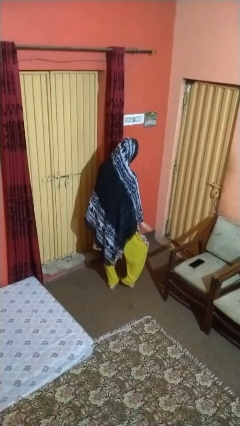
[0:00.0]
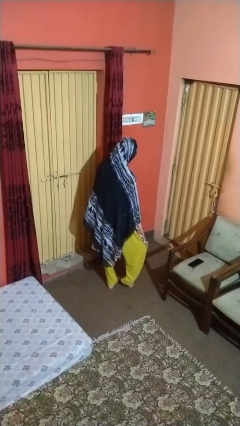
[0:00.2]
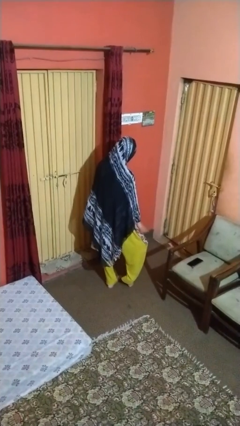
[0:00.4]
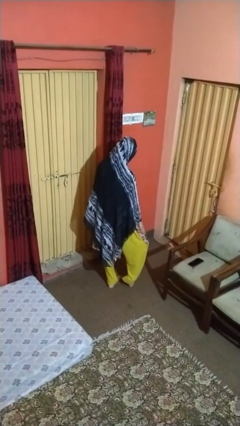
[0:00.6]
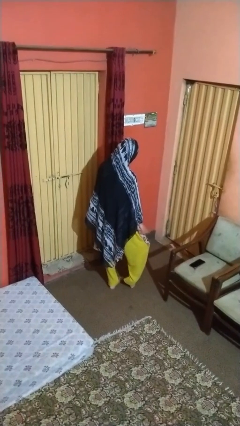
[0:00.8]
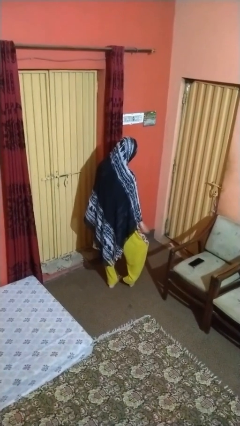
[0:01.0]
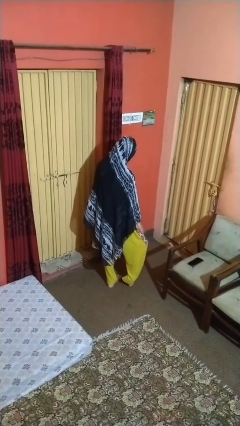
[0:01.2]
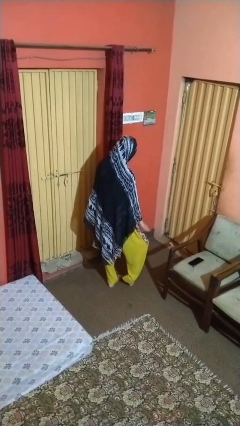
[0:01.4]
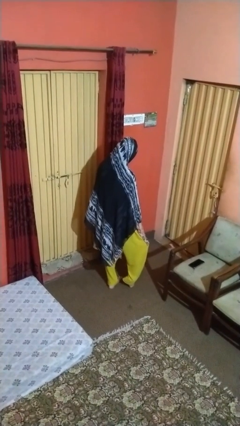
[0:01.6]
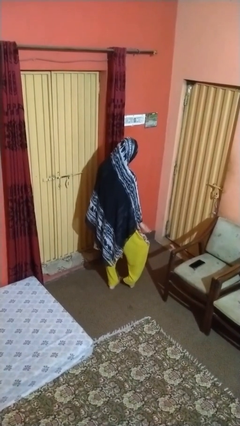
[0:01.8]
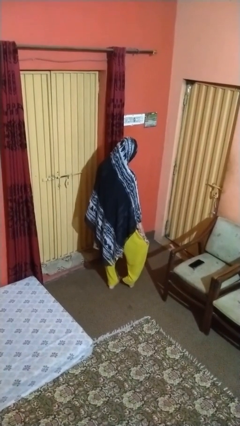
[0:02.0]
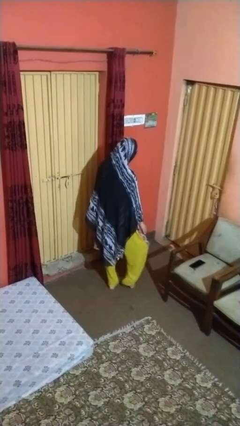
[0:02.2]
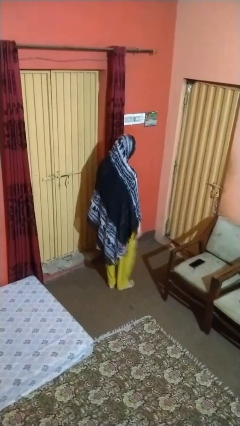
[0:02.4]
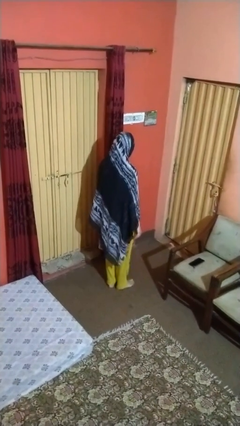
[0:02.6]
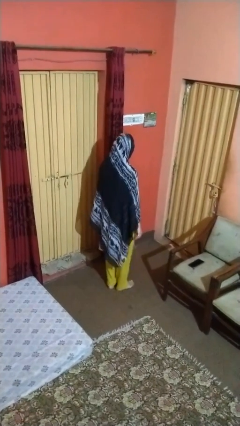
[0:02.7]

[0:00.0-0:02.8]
person slaps hands on thighs

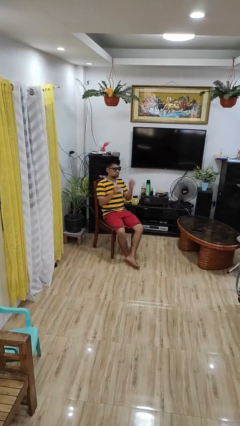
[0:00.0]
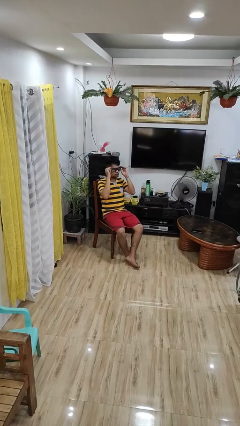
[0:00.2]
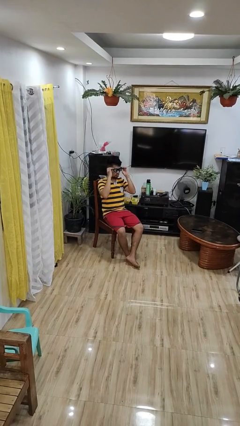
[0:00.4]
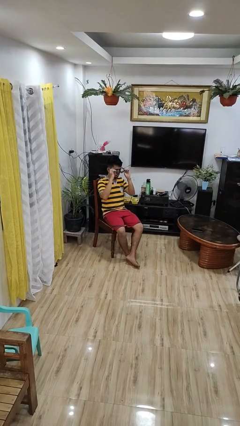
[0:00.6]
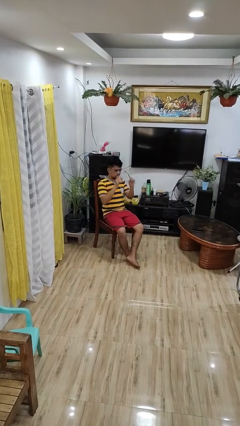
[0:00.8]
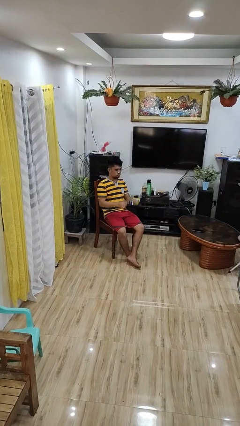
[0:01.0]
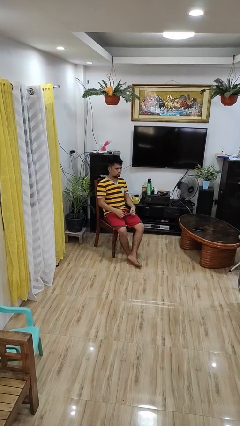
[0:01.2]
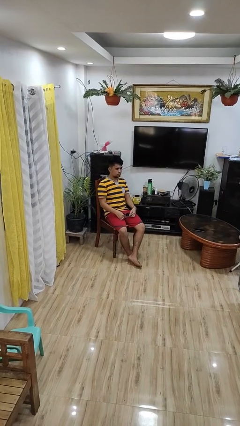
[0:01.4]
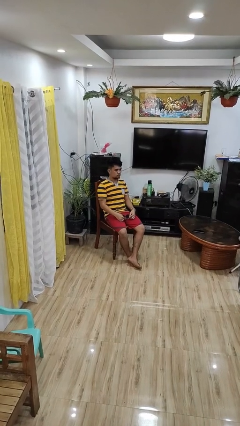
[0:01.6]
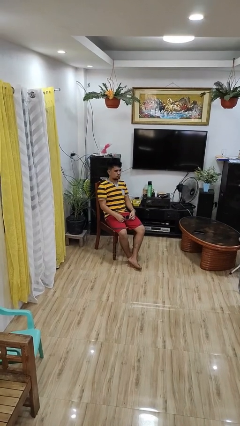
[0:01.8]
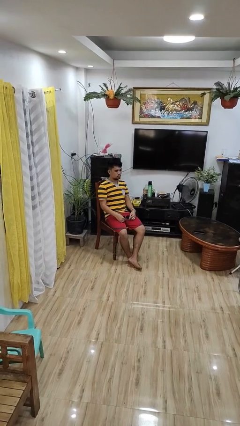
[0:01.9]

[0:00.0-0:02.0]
person takes off sunglasses

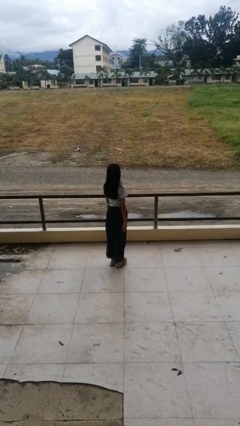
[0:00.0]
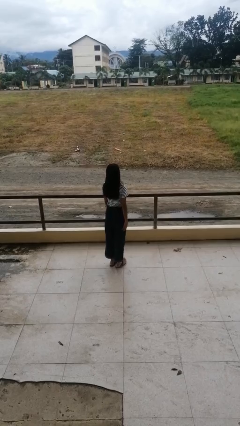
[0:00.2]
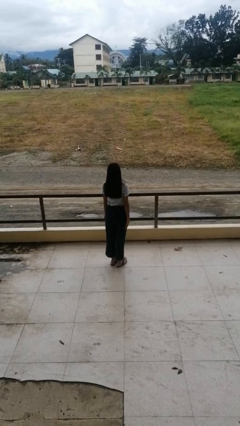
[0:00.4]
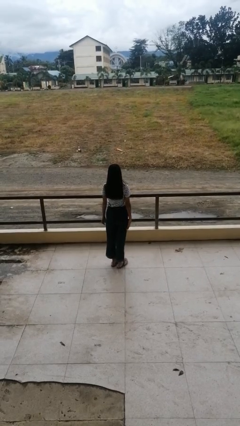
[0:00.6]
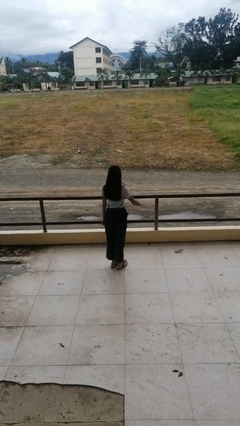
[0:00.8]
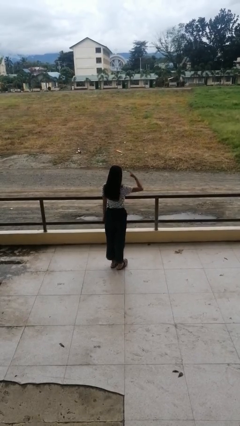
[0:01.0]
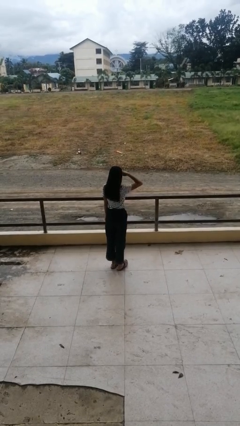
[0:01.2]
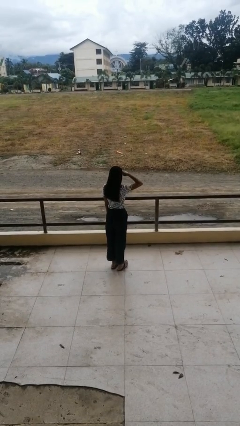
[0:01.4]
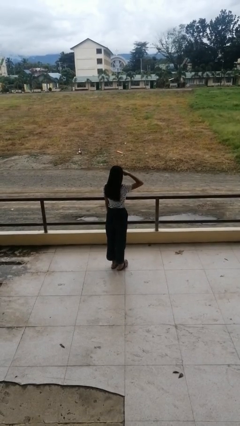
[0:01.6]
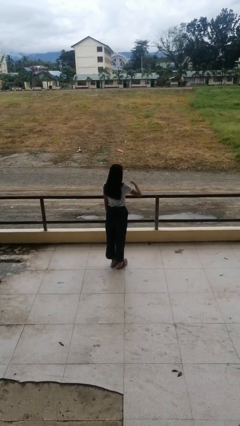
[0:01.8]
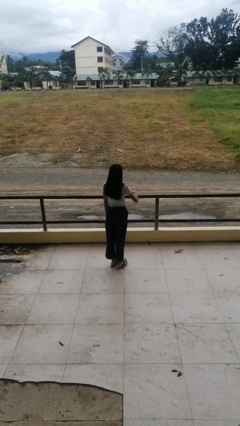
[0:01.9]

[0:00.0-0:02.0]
person salutes

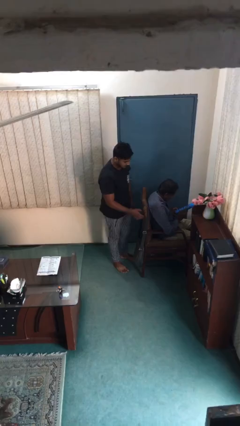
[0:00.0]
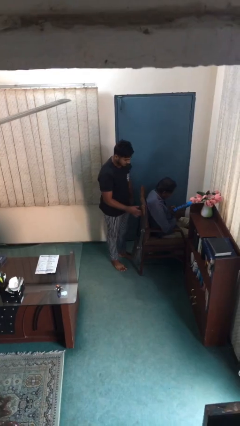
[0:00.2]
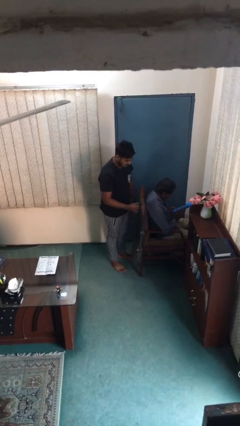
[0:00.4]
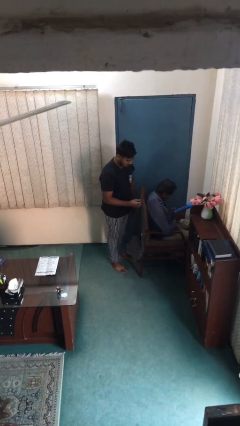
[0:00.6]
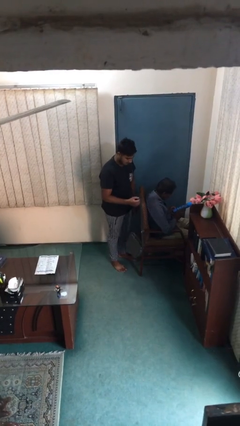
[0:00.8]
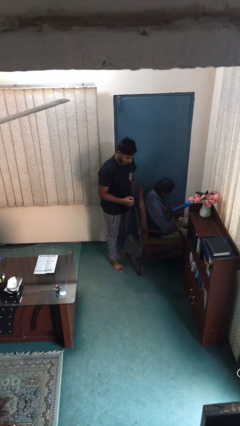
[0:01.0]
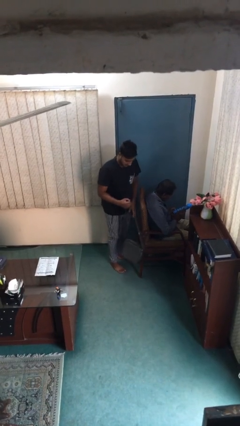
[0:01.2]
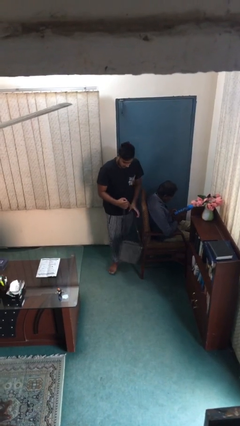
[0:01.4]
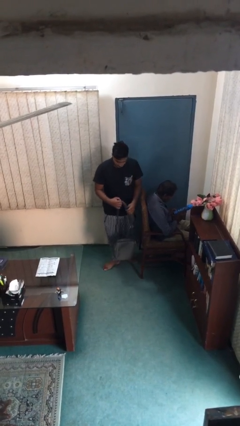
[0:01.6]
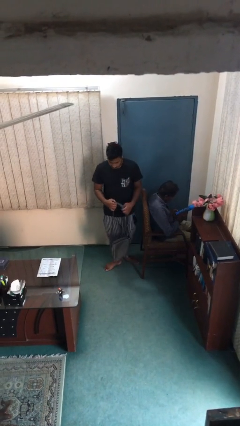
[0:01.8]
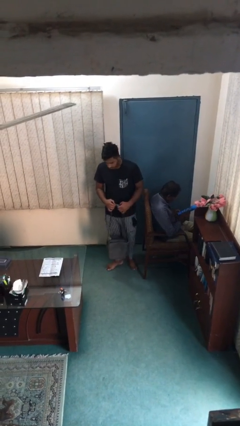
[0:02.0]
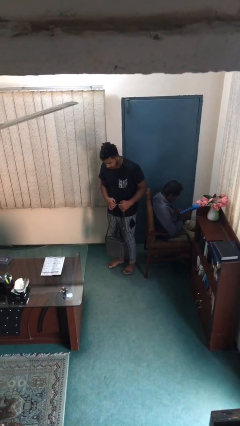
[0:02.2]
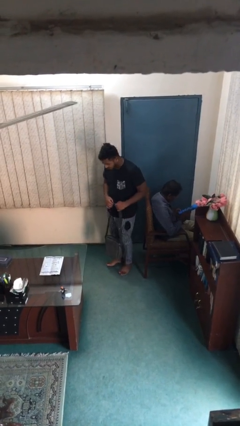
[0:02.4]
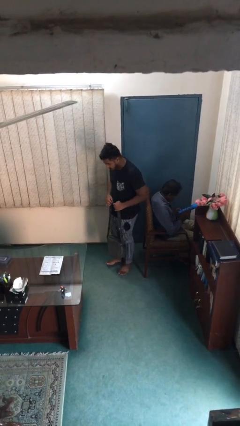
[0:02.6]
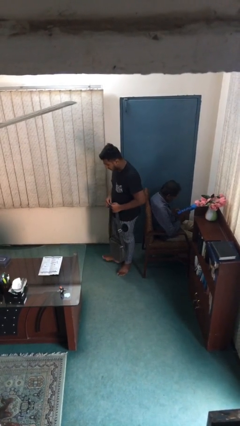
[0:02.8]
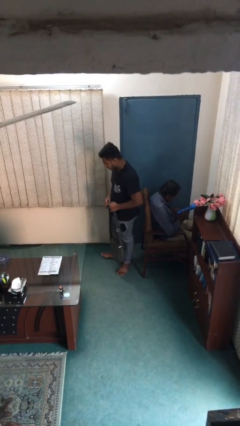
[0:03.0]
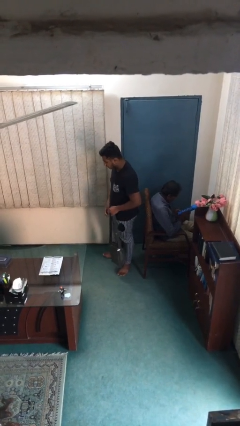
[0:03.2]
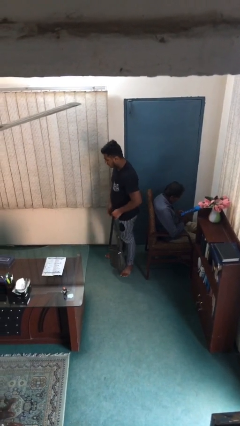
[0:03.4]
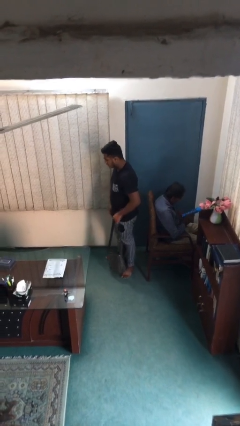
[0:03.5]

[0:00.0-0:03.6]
person steals object from person

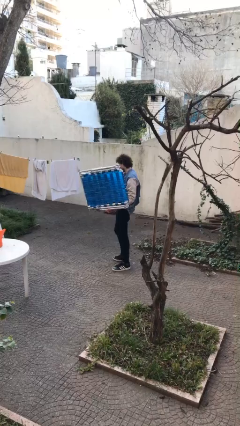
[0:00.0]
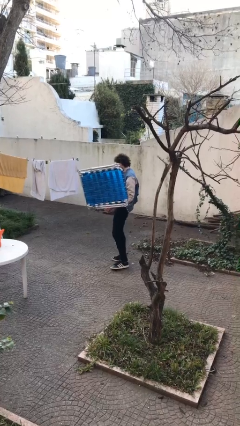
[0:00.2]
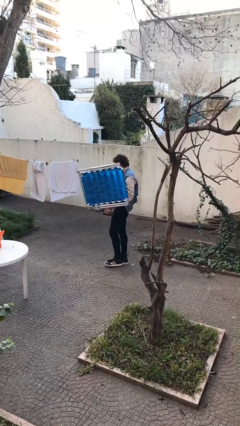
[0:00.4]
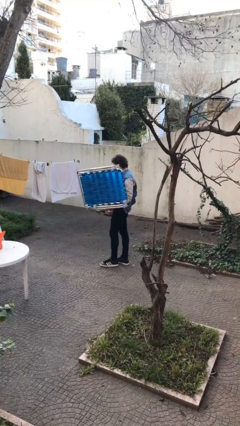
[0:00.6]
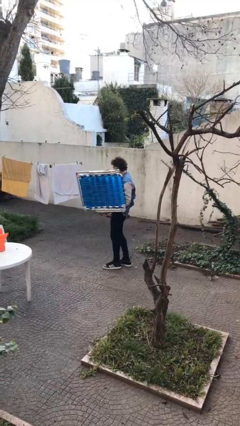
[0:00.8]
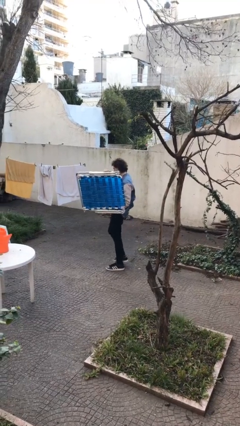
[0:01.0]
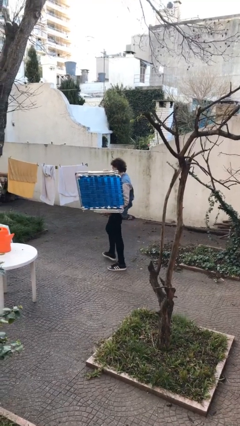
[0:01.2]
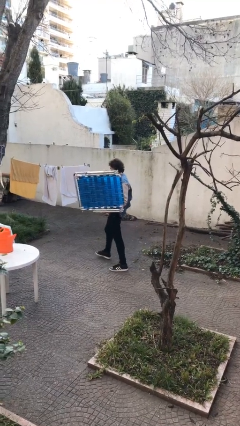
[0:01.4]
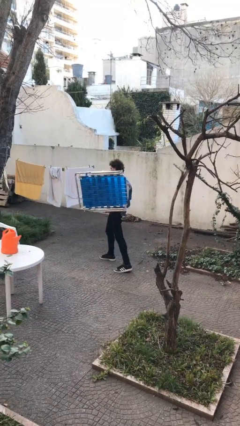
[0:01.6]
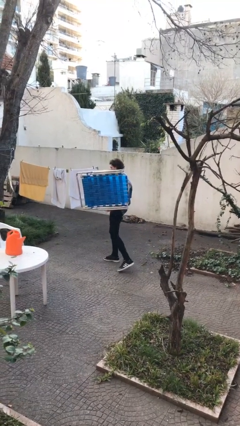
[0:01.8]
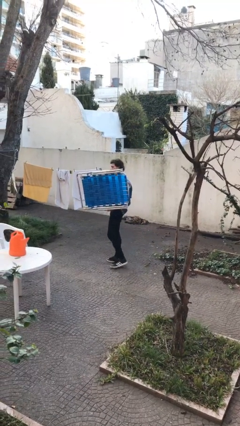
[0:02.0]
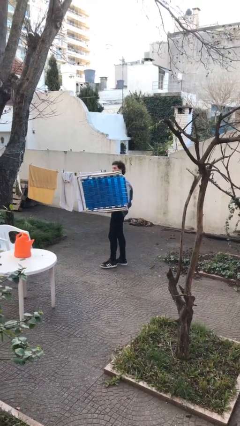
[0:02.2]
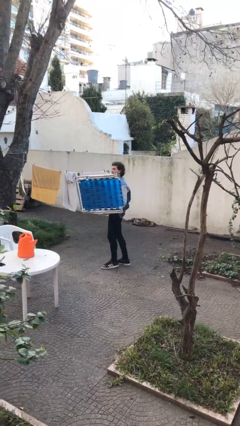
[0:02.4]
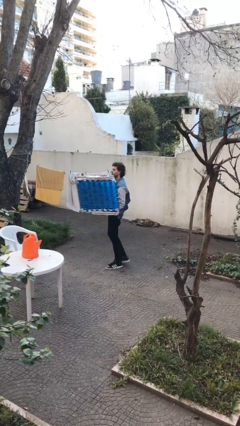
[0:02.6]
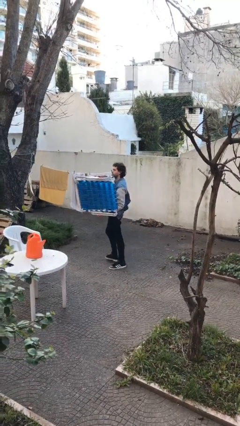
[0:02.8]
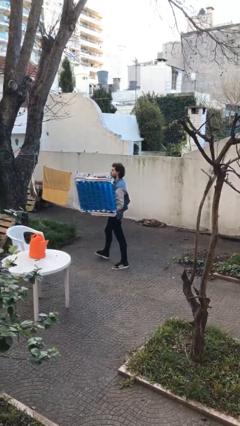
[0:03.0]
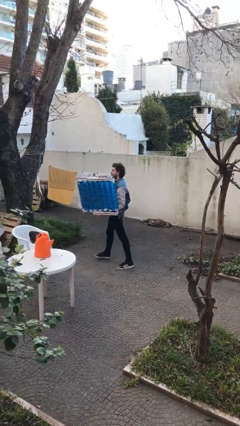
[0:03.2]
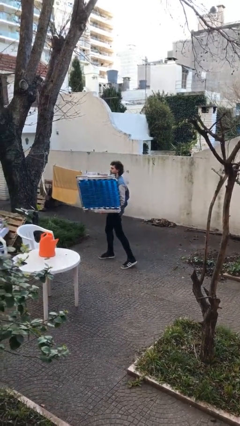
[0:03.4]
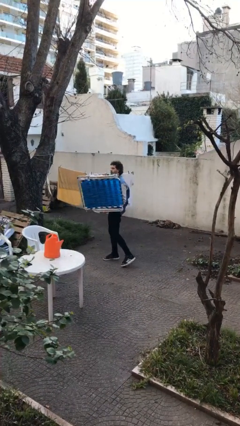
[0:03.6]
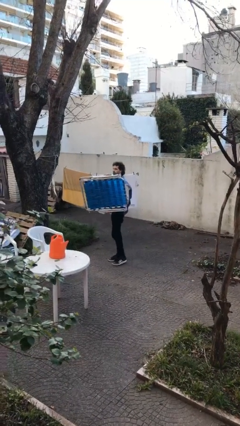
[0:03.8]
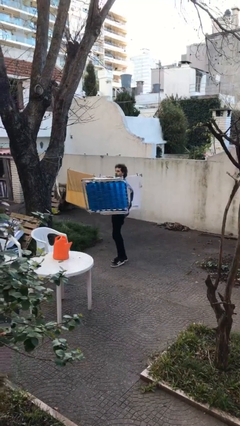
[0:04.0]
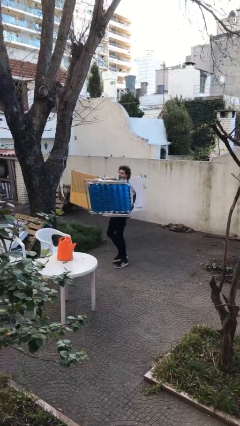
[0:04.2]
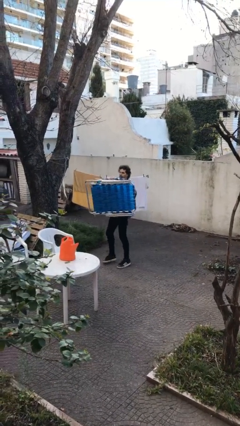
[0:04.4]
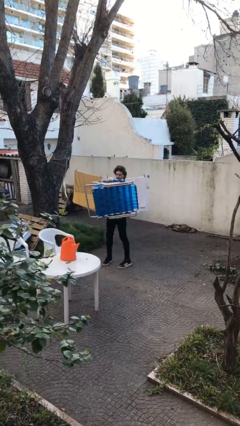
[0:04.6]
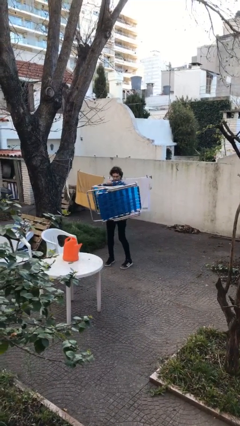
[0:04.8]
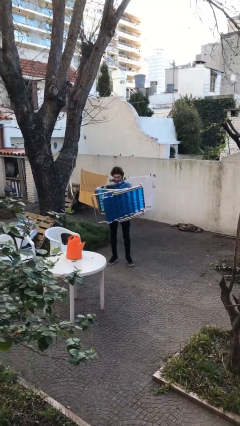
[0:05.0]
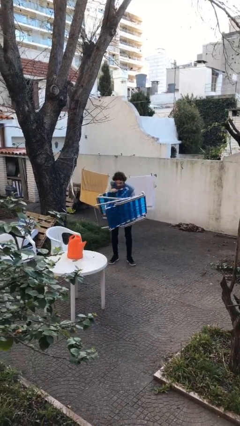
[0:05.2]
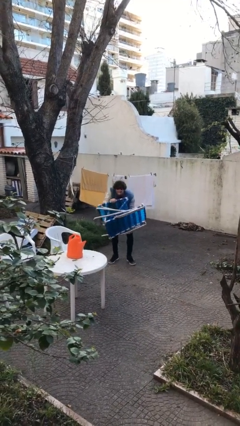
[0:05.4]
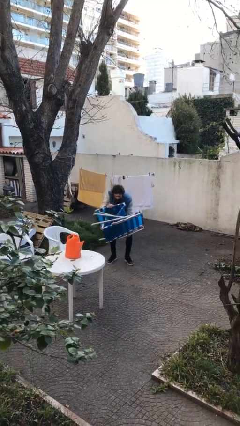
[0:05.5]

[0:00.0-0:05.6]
person carries heavy object

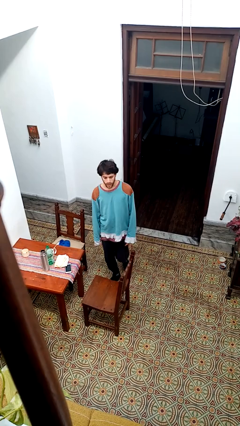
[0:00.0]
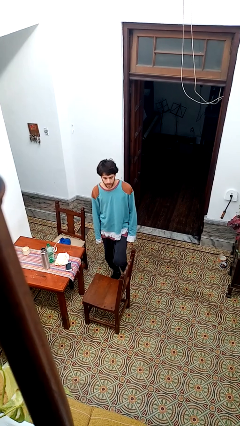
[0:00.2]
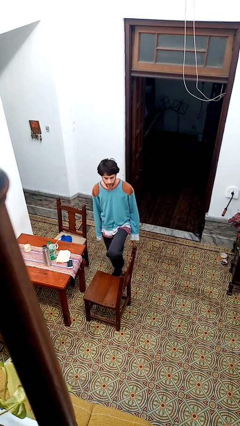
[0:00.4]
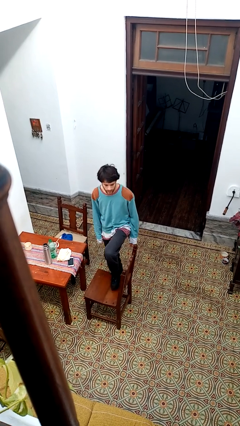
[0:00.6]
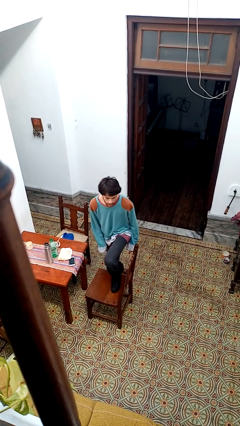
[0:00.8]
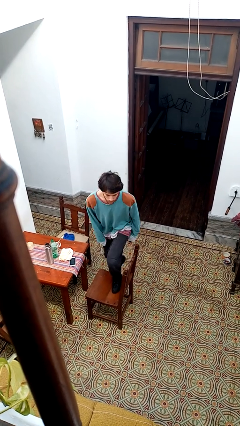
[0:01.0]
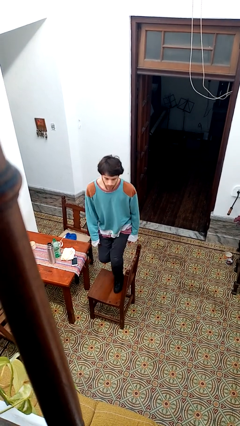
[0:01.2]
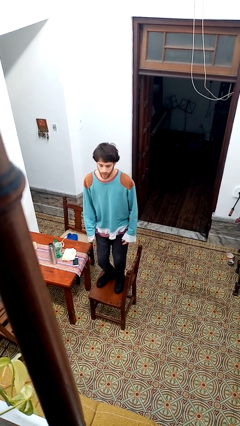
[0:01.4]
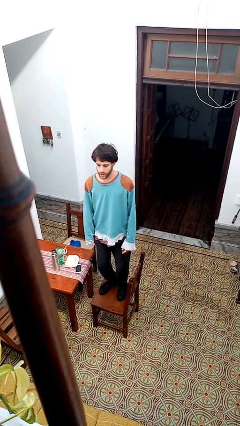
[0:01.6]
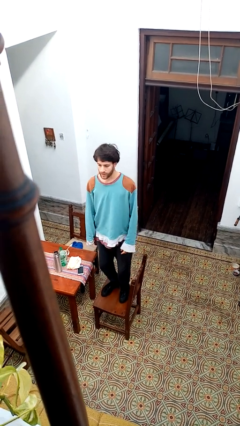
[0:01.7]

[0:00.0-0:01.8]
person climbs on chair
